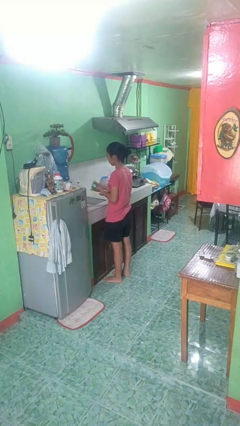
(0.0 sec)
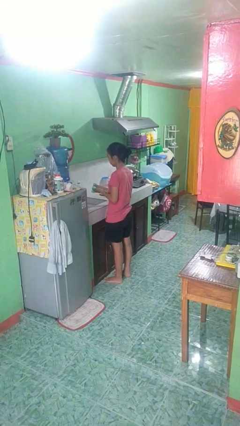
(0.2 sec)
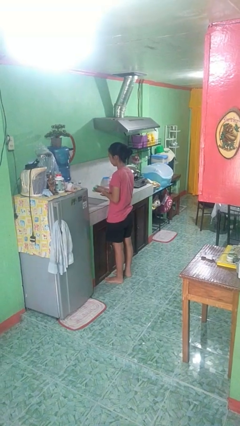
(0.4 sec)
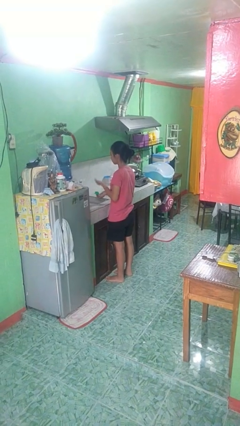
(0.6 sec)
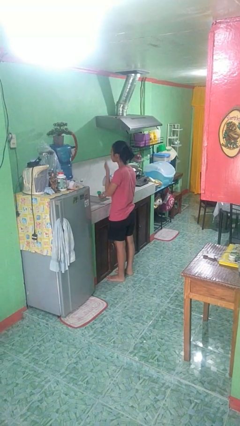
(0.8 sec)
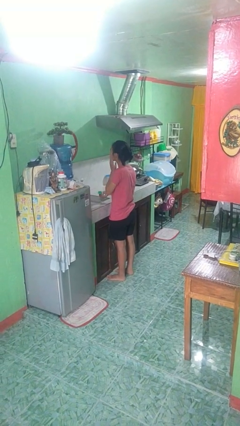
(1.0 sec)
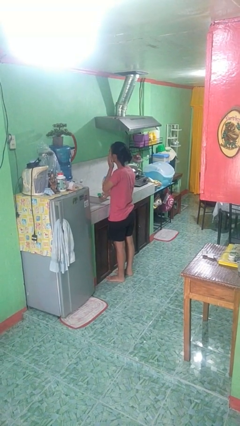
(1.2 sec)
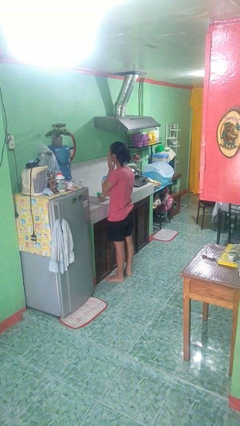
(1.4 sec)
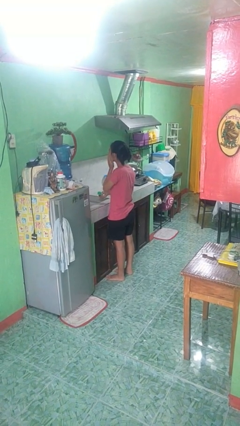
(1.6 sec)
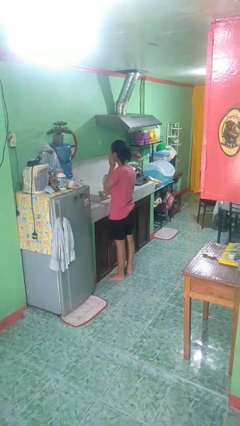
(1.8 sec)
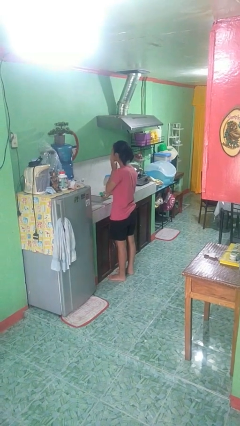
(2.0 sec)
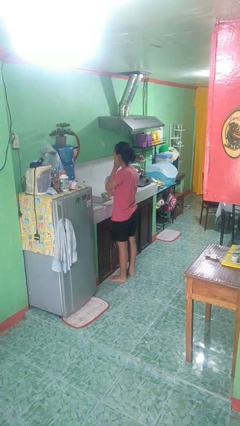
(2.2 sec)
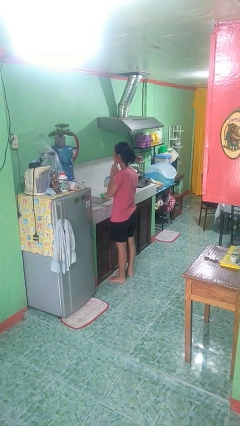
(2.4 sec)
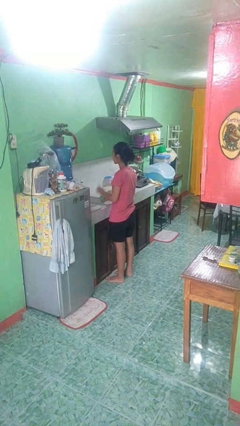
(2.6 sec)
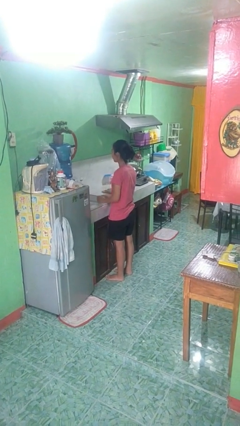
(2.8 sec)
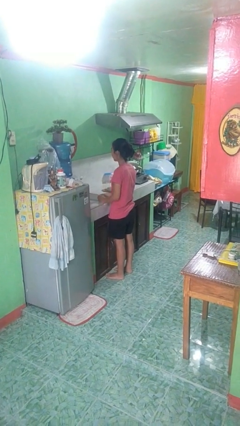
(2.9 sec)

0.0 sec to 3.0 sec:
person applies facial moisturizer

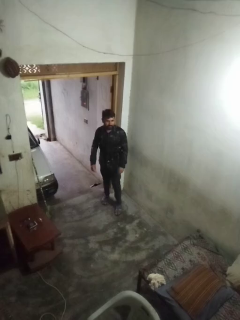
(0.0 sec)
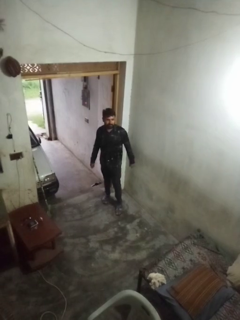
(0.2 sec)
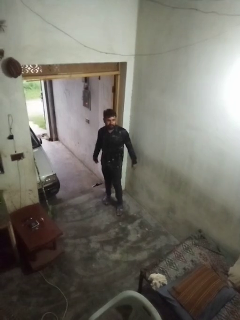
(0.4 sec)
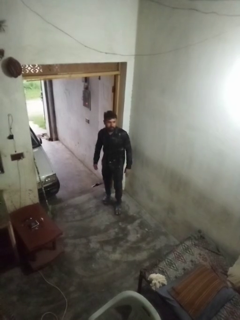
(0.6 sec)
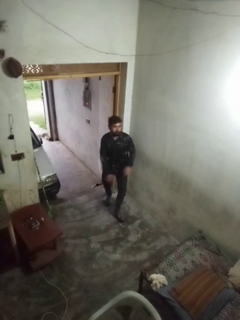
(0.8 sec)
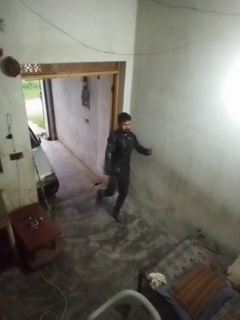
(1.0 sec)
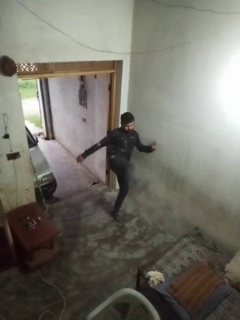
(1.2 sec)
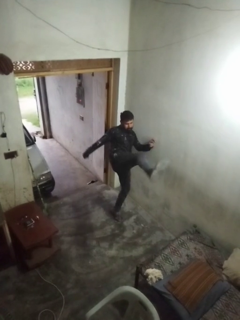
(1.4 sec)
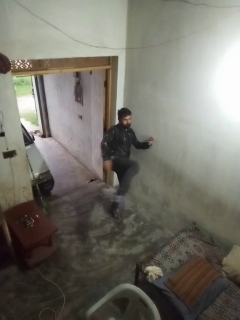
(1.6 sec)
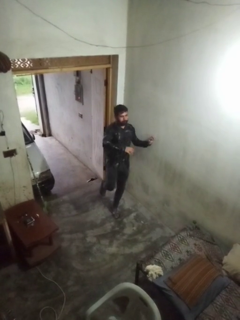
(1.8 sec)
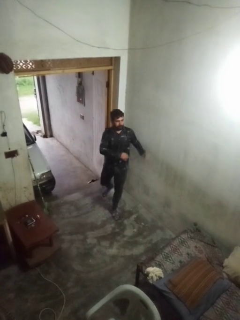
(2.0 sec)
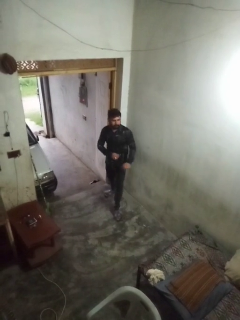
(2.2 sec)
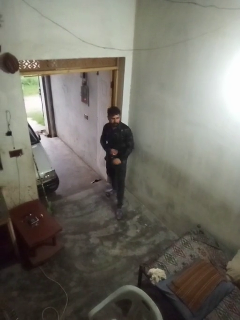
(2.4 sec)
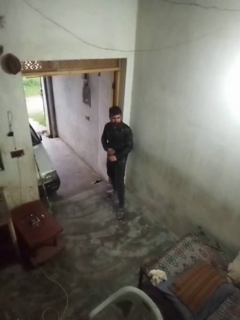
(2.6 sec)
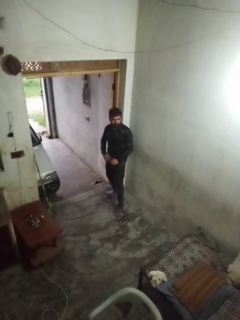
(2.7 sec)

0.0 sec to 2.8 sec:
person karate kicks

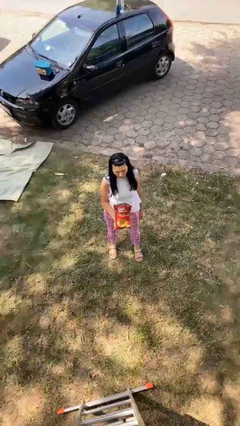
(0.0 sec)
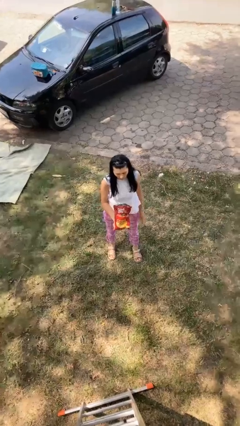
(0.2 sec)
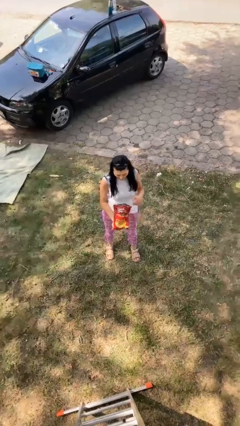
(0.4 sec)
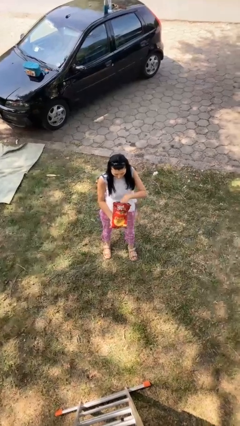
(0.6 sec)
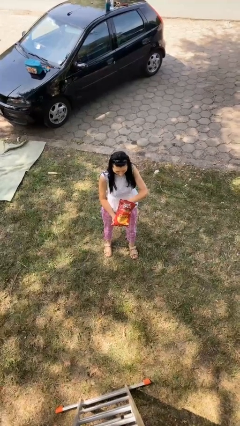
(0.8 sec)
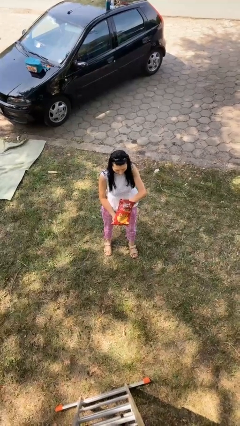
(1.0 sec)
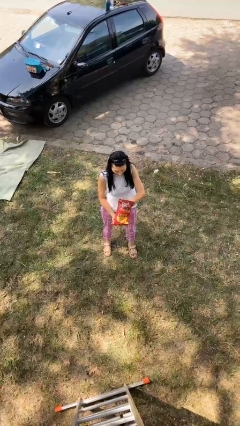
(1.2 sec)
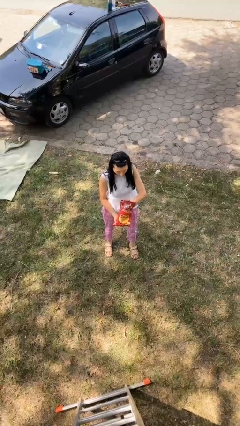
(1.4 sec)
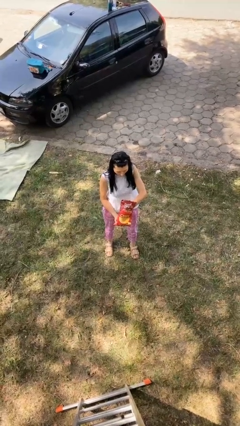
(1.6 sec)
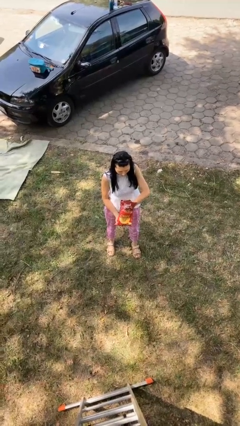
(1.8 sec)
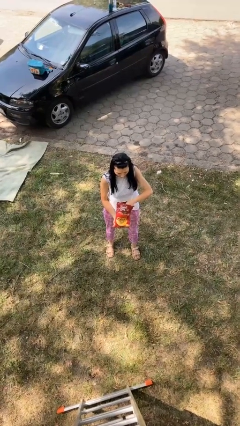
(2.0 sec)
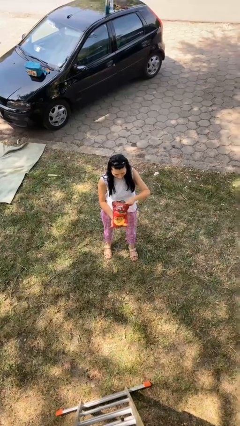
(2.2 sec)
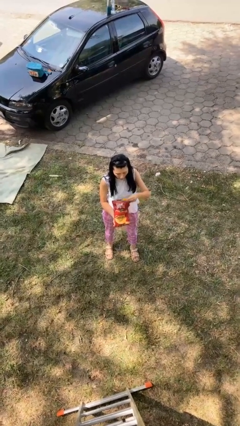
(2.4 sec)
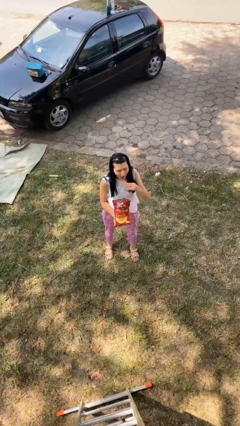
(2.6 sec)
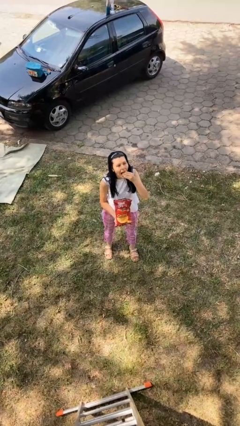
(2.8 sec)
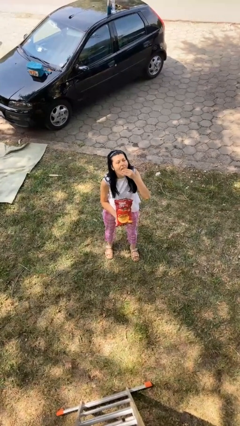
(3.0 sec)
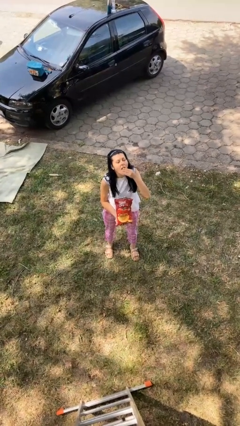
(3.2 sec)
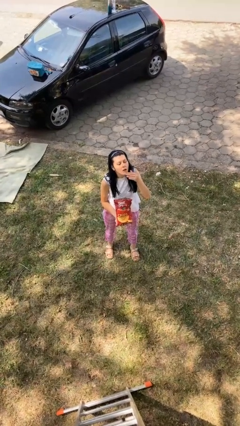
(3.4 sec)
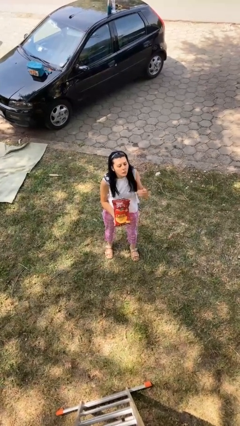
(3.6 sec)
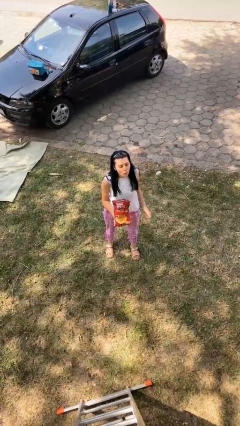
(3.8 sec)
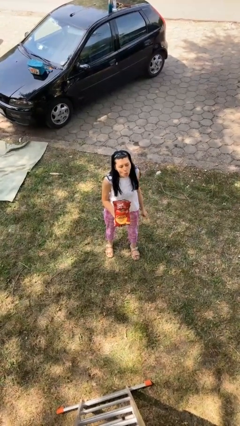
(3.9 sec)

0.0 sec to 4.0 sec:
person eats snack from bag

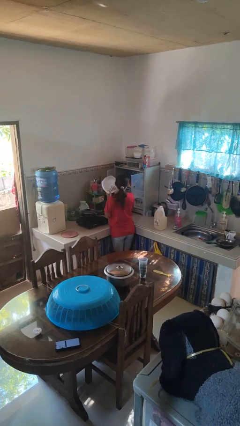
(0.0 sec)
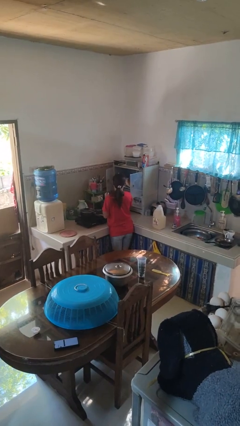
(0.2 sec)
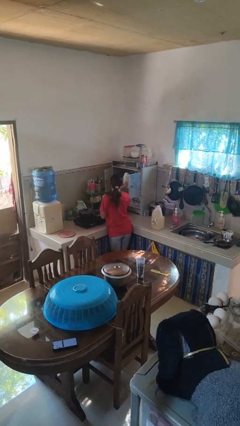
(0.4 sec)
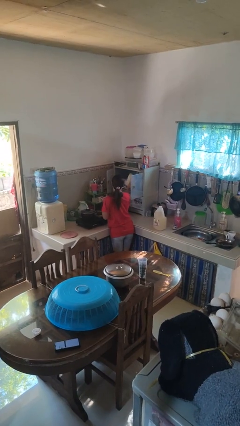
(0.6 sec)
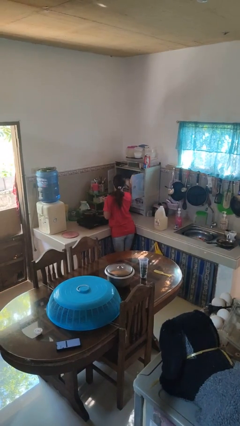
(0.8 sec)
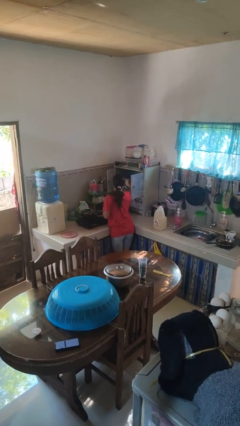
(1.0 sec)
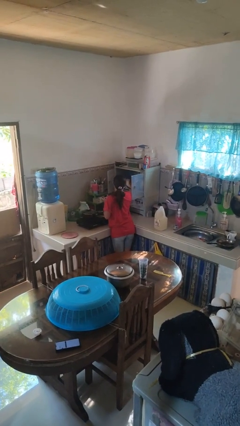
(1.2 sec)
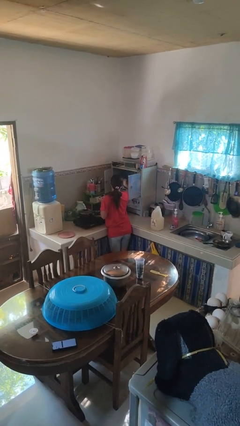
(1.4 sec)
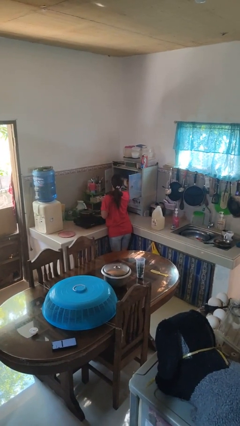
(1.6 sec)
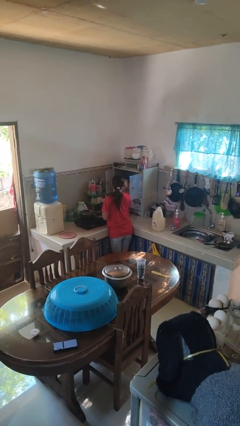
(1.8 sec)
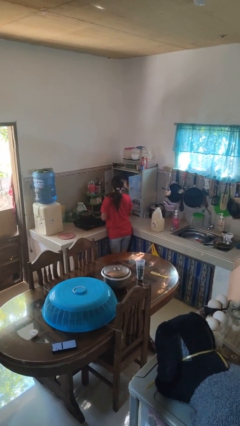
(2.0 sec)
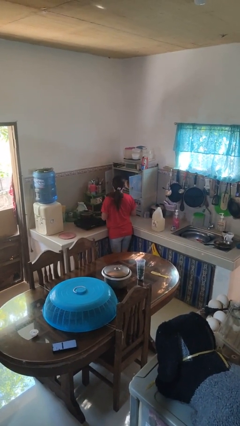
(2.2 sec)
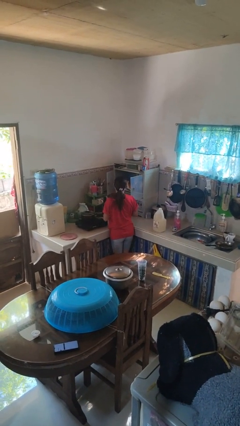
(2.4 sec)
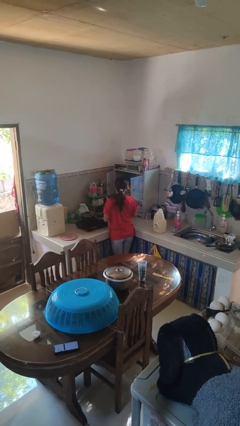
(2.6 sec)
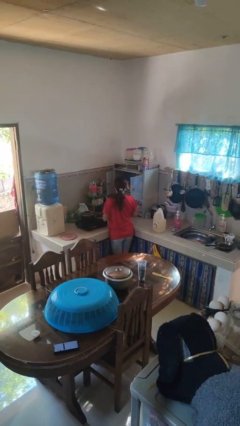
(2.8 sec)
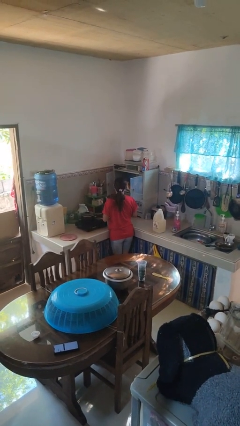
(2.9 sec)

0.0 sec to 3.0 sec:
person puts object in cabinet

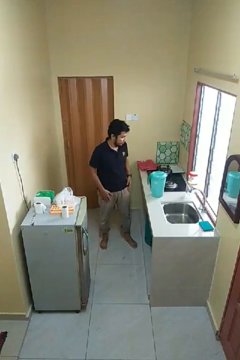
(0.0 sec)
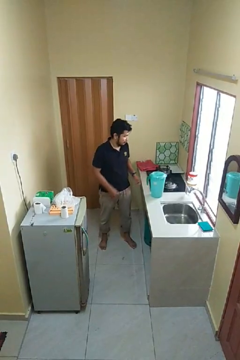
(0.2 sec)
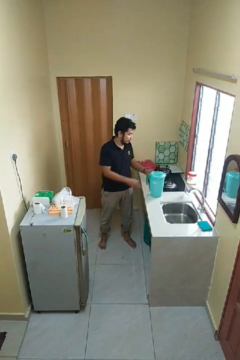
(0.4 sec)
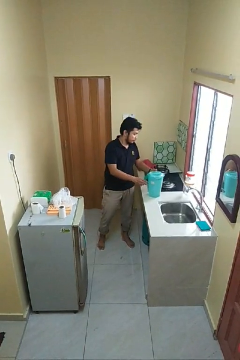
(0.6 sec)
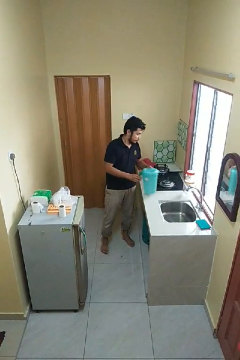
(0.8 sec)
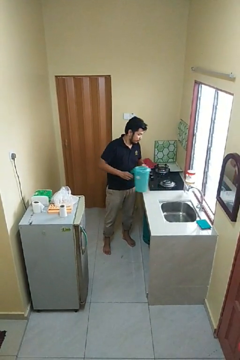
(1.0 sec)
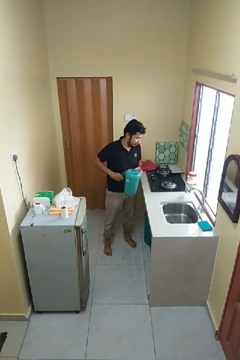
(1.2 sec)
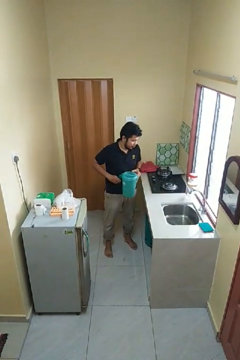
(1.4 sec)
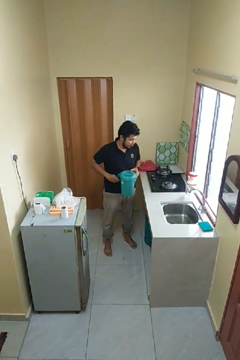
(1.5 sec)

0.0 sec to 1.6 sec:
person picks up object from countertop

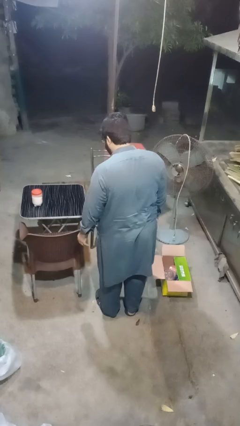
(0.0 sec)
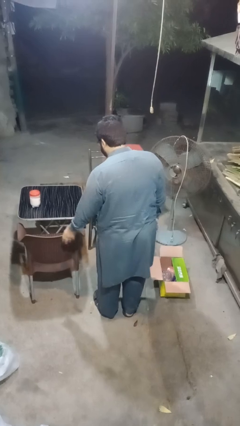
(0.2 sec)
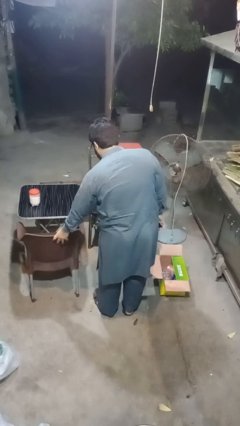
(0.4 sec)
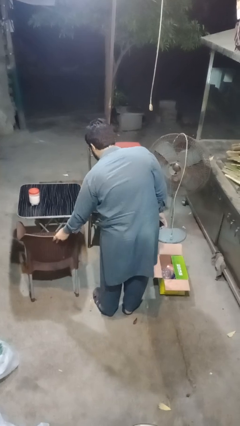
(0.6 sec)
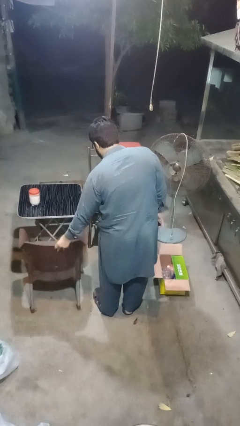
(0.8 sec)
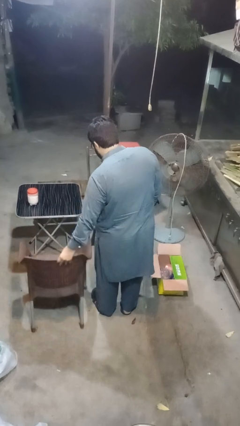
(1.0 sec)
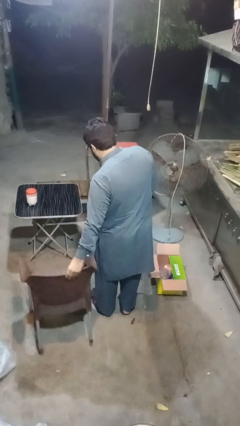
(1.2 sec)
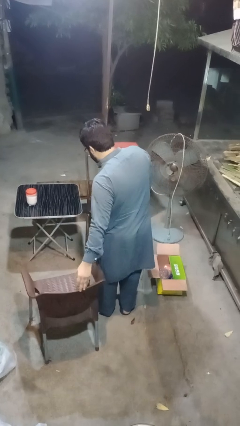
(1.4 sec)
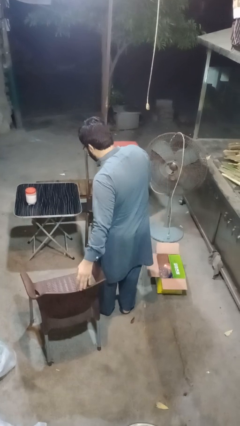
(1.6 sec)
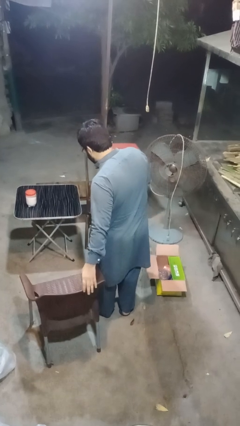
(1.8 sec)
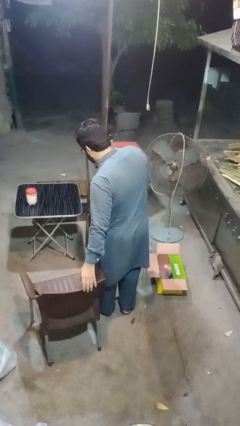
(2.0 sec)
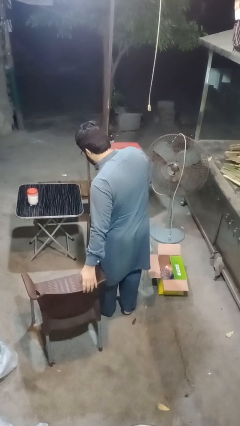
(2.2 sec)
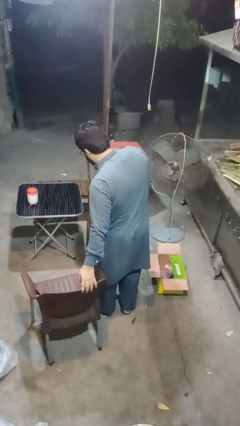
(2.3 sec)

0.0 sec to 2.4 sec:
person pulls out chair

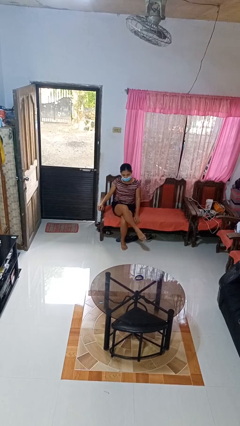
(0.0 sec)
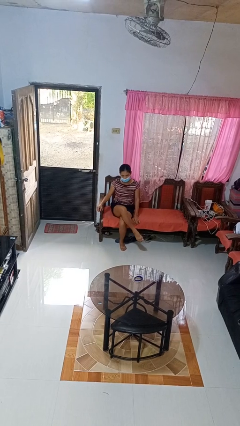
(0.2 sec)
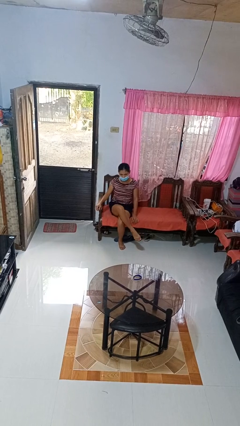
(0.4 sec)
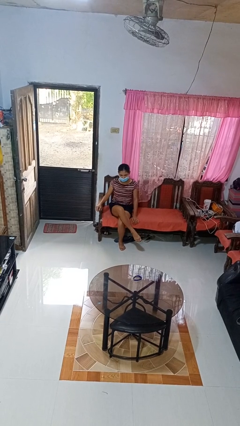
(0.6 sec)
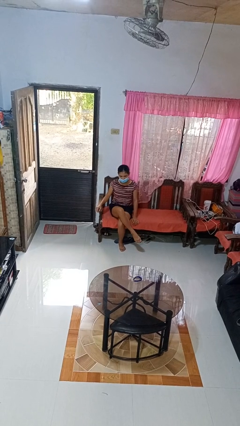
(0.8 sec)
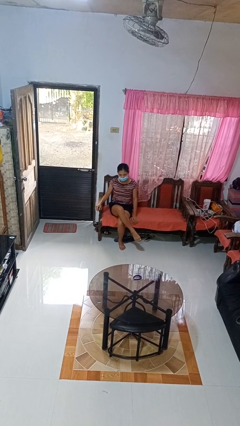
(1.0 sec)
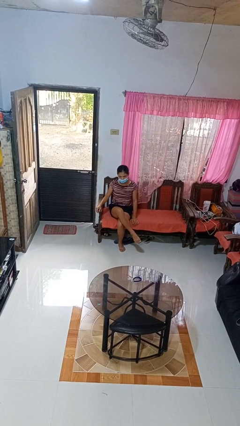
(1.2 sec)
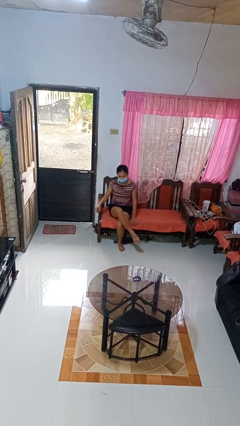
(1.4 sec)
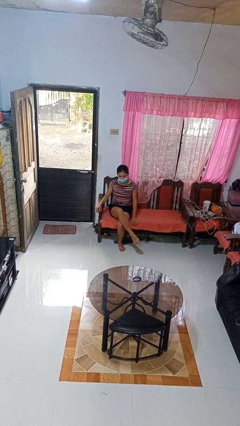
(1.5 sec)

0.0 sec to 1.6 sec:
person crosses legs
